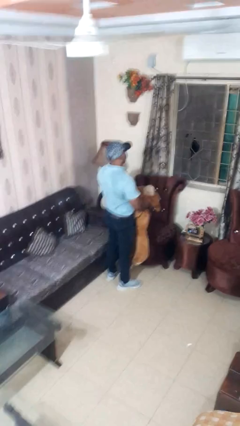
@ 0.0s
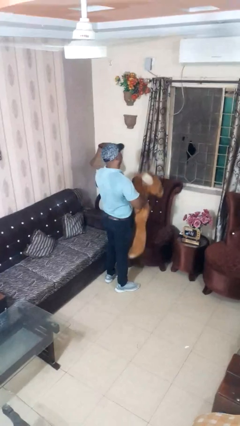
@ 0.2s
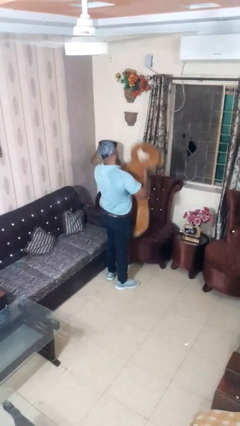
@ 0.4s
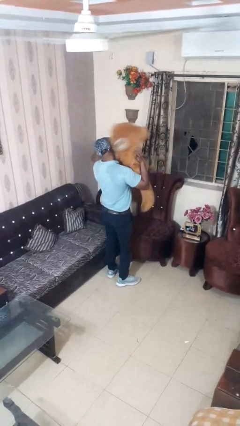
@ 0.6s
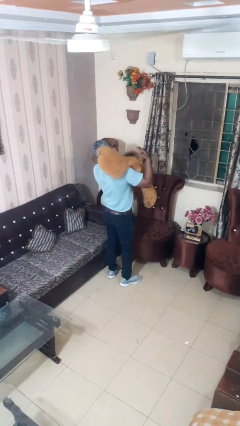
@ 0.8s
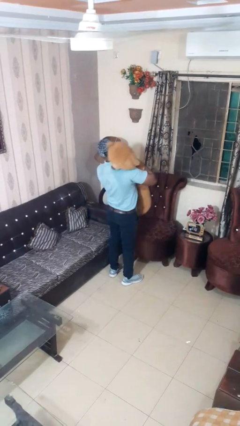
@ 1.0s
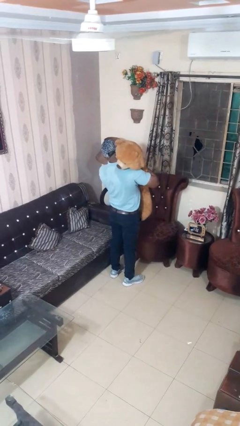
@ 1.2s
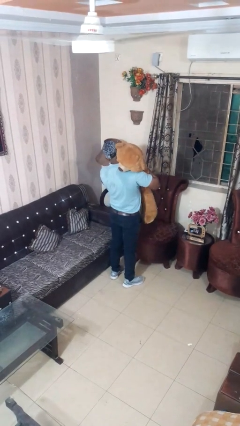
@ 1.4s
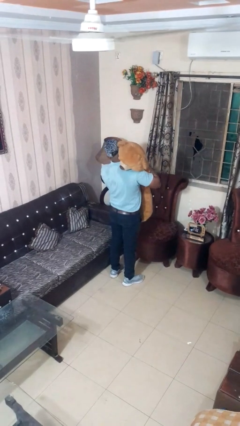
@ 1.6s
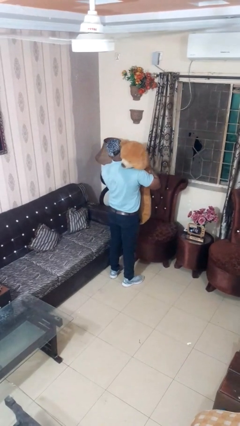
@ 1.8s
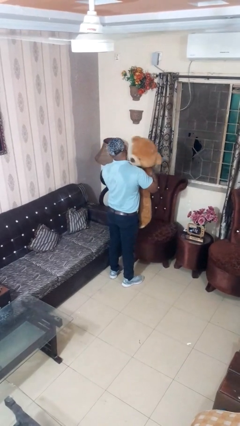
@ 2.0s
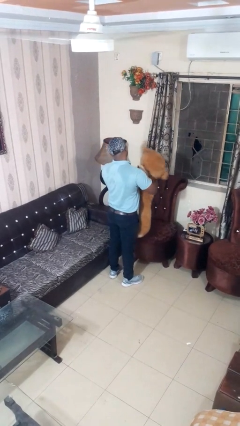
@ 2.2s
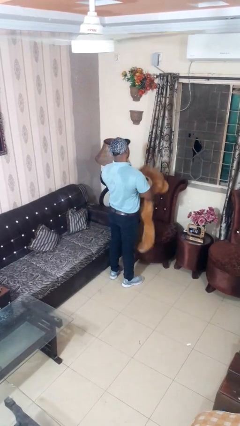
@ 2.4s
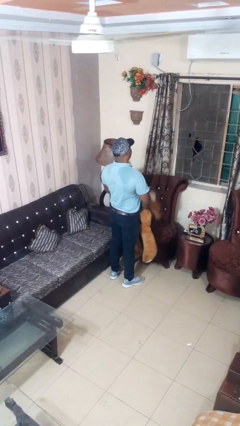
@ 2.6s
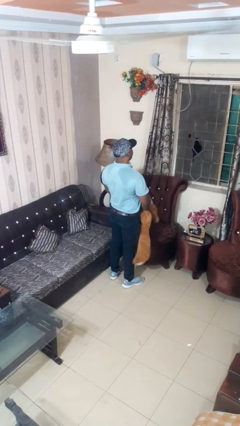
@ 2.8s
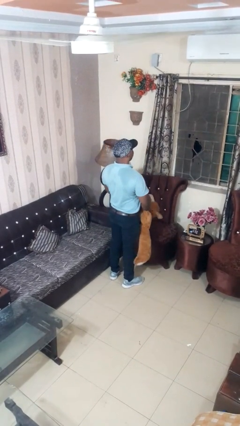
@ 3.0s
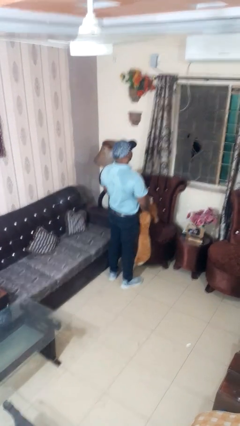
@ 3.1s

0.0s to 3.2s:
person hugs stuffed animal

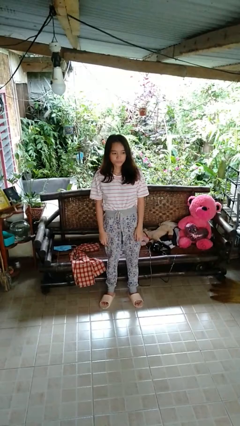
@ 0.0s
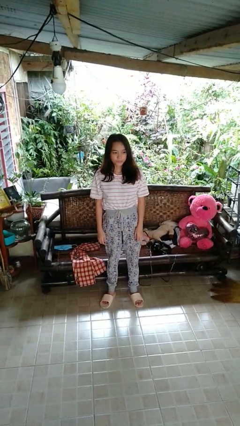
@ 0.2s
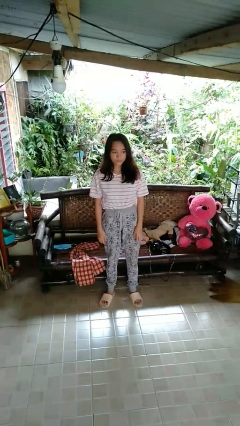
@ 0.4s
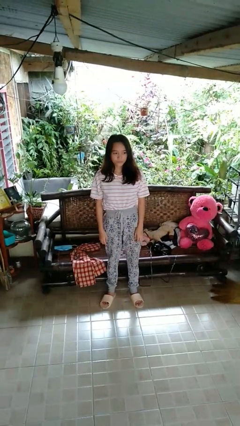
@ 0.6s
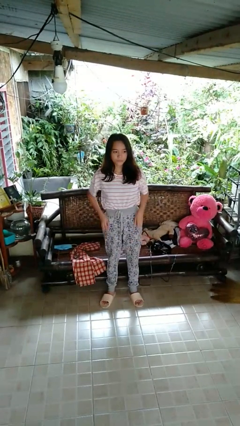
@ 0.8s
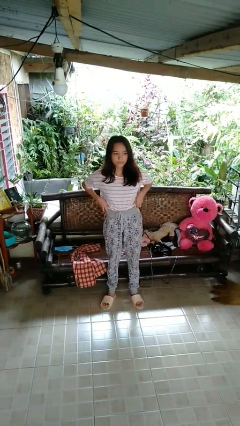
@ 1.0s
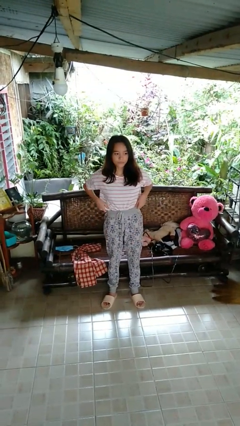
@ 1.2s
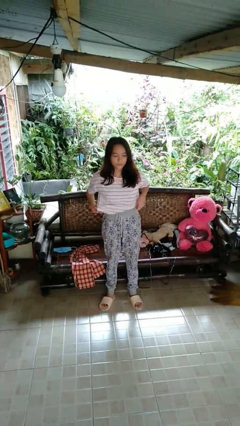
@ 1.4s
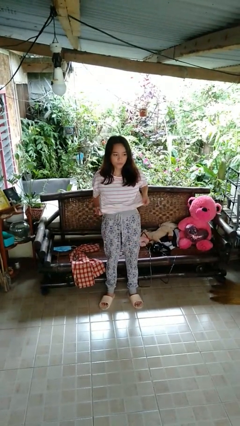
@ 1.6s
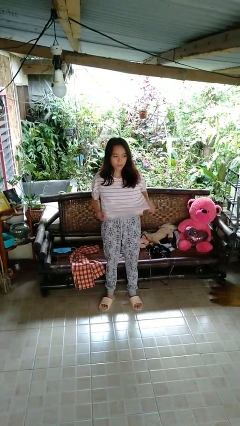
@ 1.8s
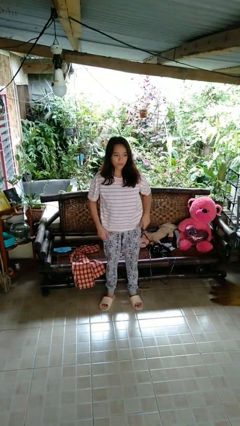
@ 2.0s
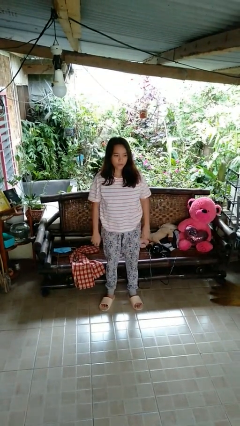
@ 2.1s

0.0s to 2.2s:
person untucks shirt

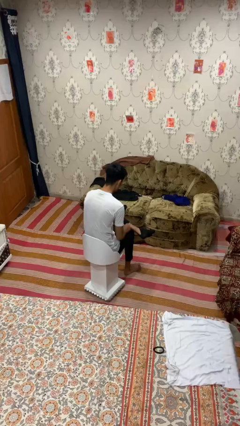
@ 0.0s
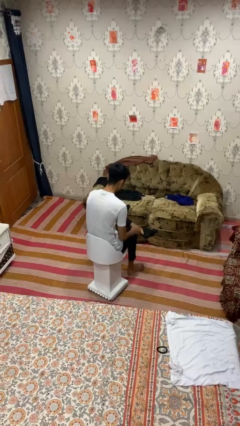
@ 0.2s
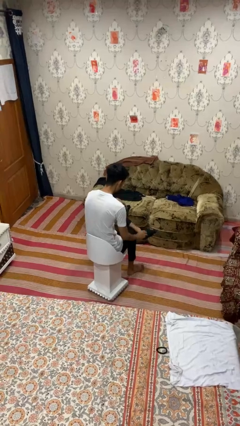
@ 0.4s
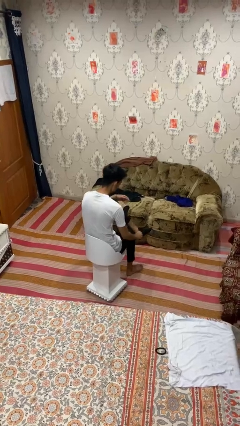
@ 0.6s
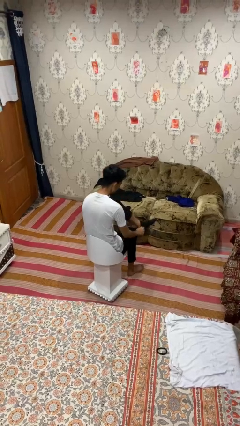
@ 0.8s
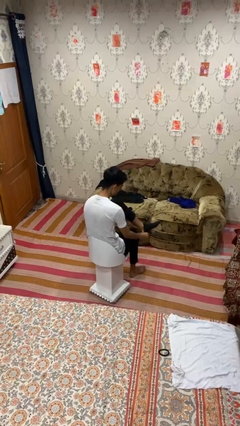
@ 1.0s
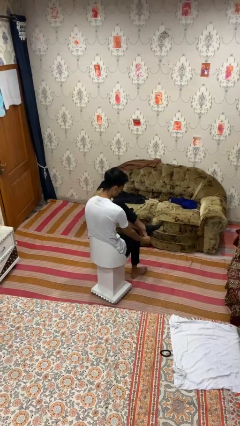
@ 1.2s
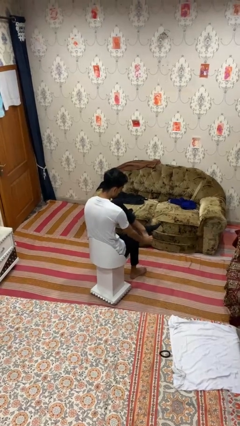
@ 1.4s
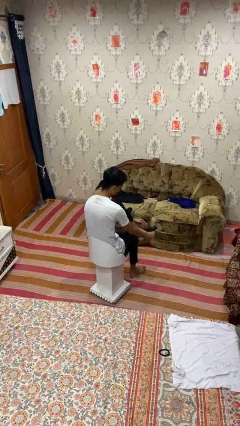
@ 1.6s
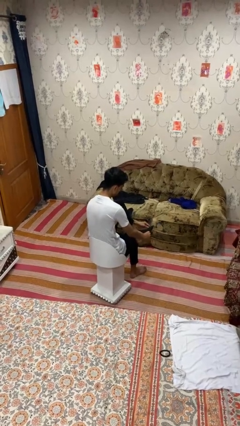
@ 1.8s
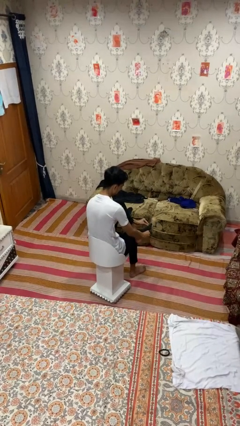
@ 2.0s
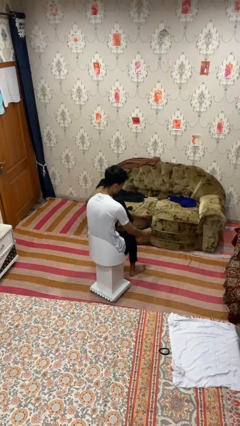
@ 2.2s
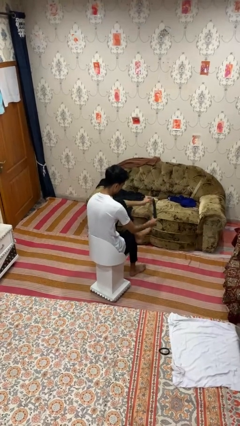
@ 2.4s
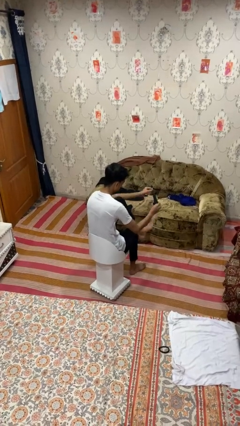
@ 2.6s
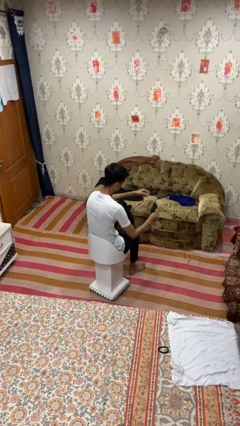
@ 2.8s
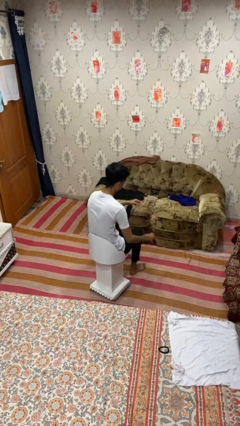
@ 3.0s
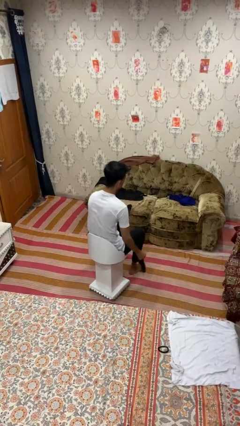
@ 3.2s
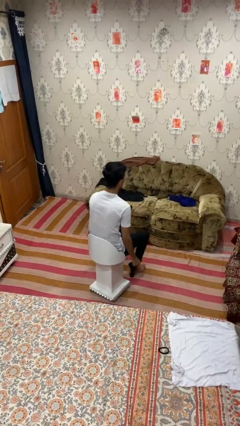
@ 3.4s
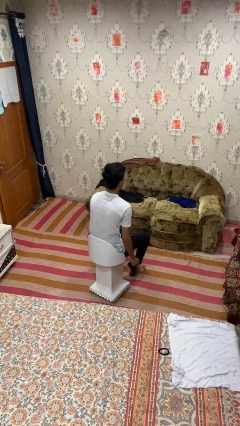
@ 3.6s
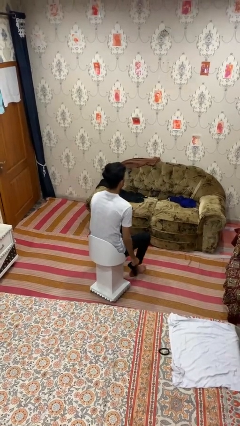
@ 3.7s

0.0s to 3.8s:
person takes off socks

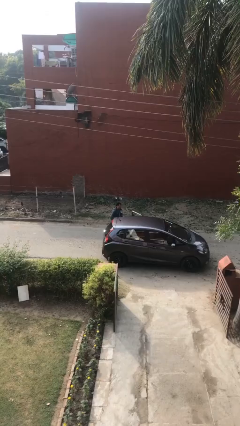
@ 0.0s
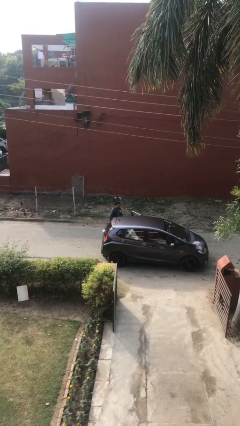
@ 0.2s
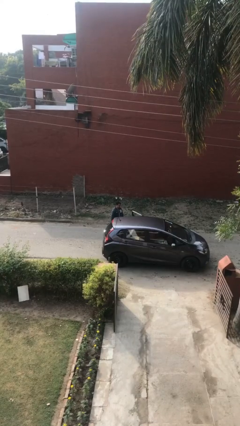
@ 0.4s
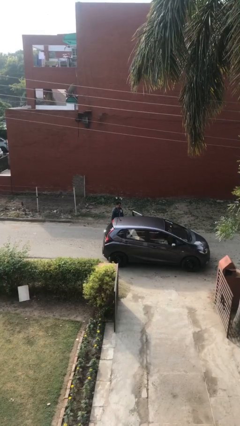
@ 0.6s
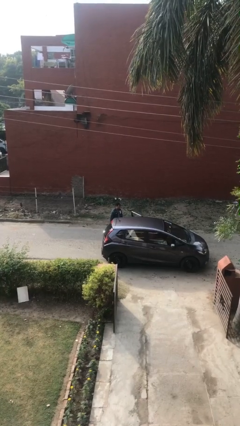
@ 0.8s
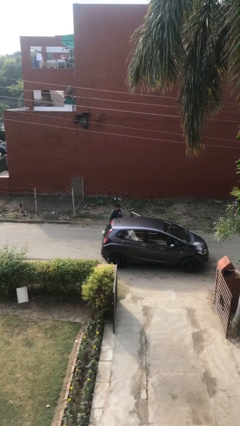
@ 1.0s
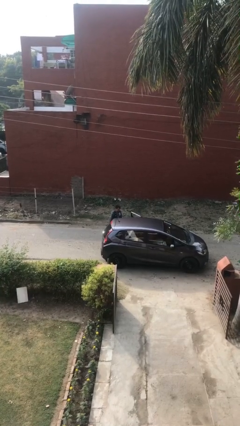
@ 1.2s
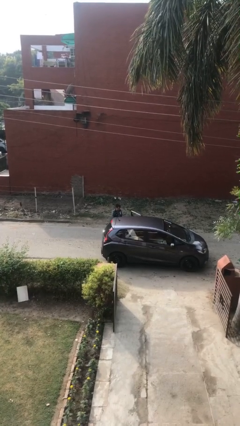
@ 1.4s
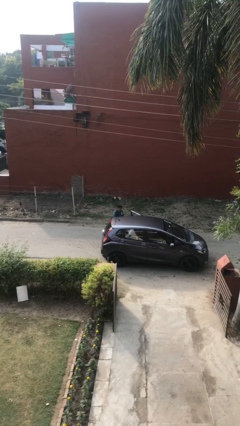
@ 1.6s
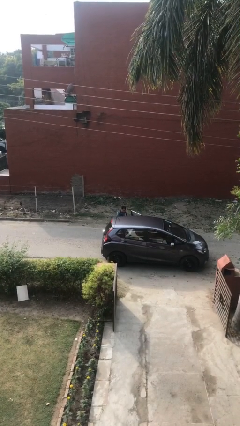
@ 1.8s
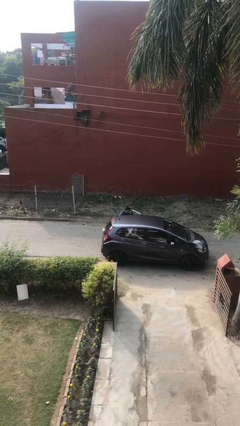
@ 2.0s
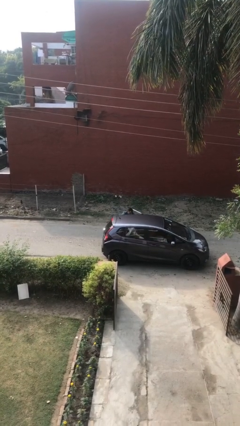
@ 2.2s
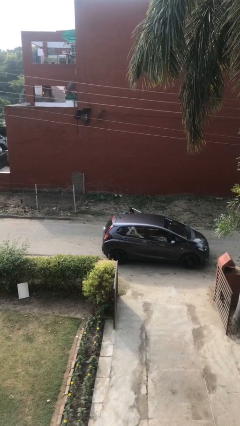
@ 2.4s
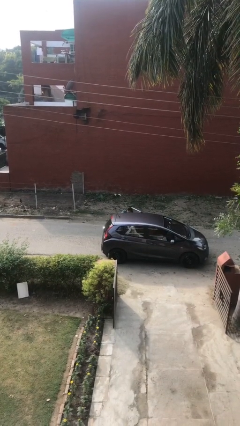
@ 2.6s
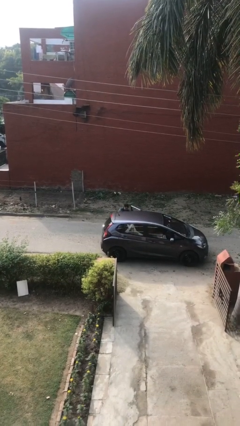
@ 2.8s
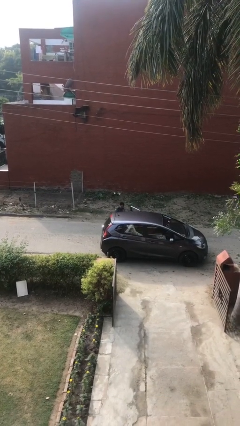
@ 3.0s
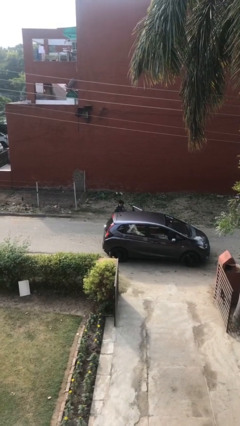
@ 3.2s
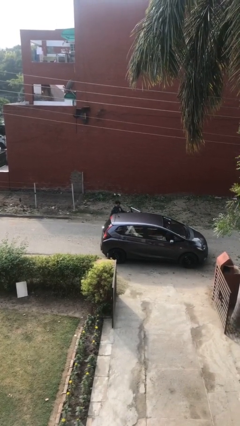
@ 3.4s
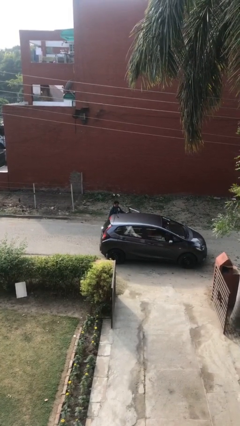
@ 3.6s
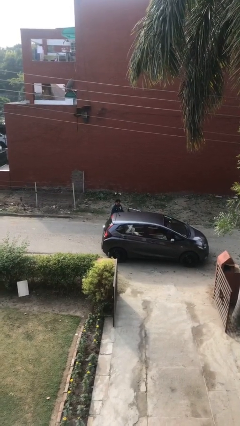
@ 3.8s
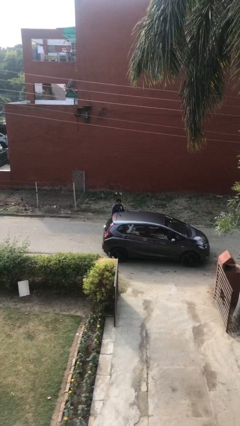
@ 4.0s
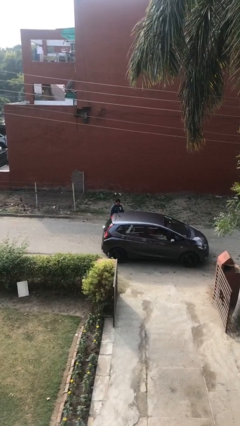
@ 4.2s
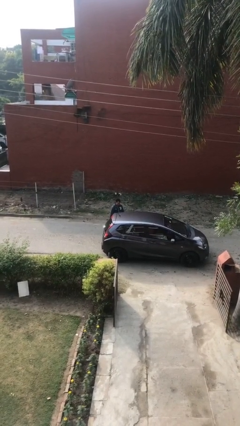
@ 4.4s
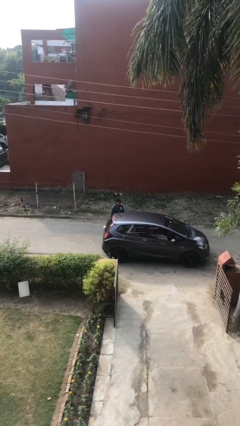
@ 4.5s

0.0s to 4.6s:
person loads car

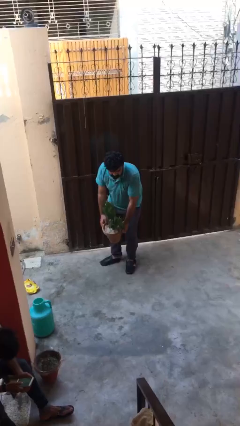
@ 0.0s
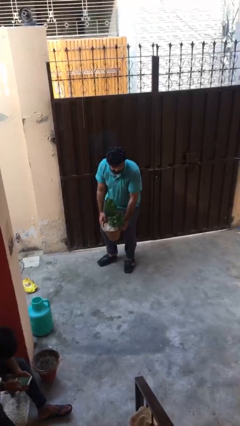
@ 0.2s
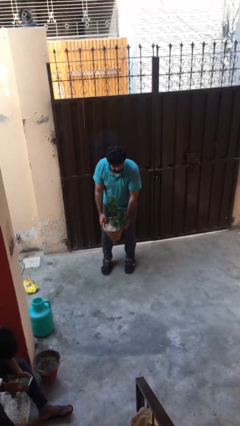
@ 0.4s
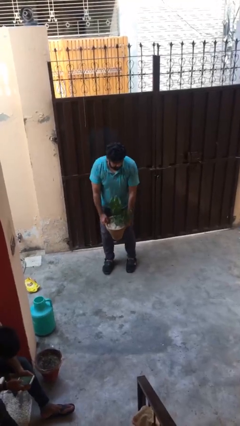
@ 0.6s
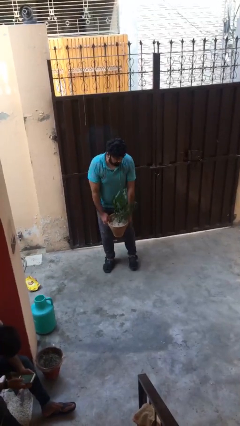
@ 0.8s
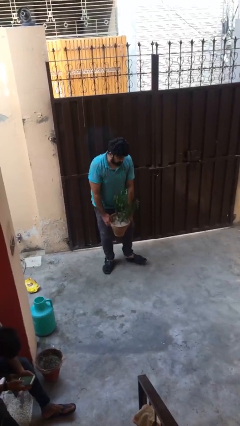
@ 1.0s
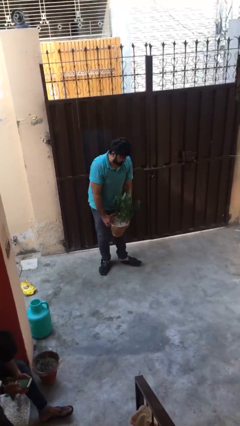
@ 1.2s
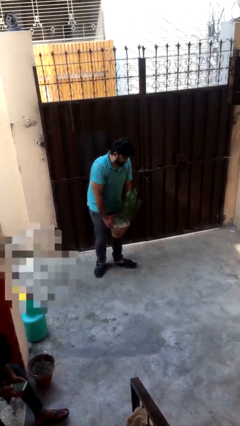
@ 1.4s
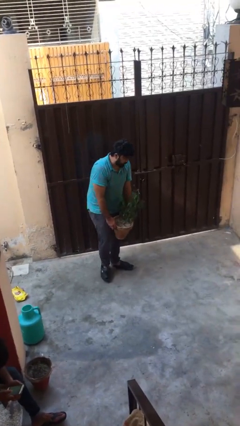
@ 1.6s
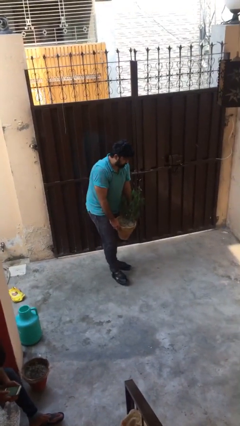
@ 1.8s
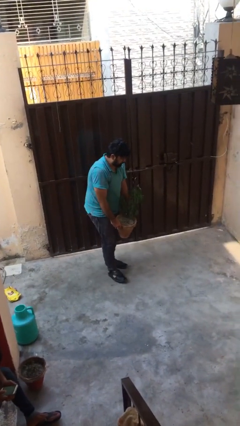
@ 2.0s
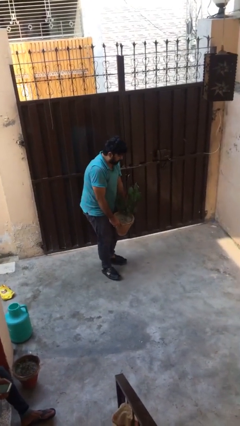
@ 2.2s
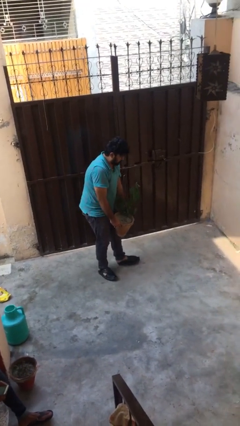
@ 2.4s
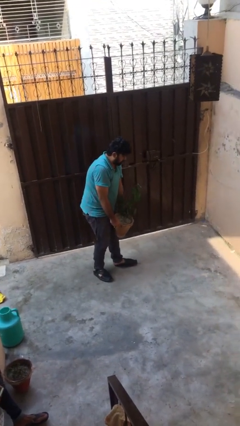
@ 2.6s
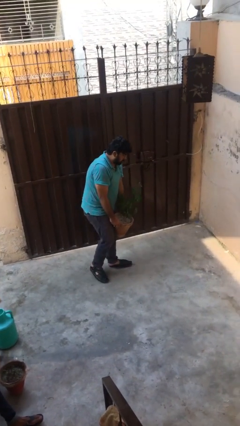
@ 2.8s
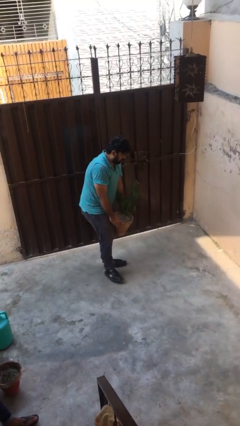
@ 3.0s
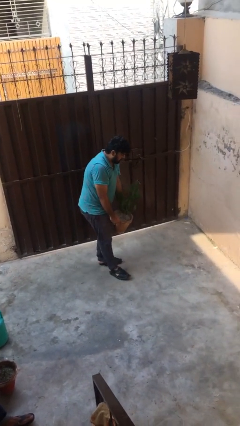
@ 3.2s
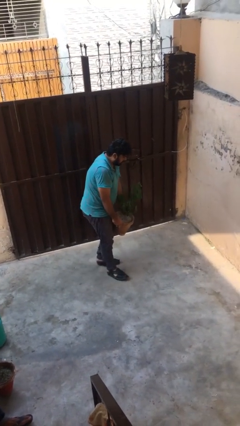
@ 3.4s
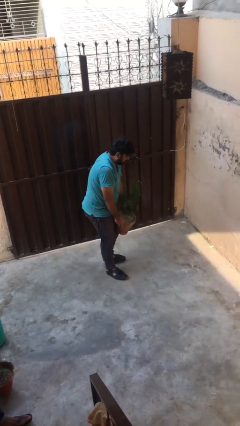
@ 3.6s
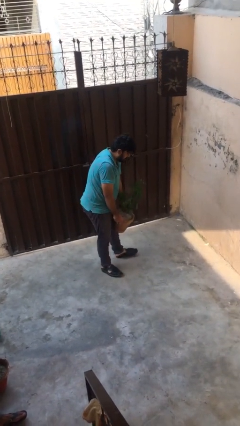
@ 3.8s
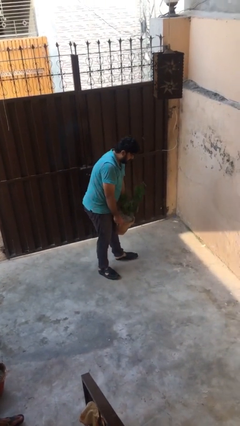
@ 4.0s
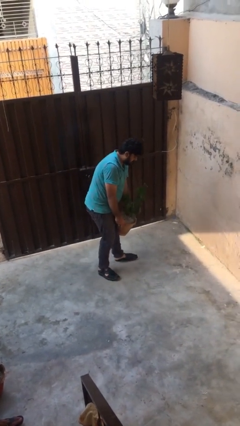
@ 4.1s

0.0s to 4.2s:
person carries heavy object
